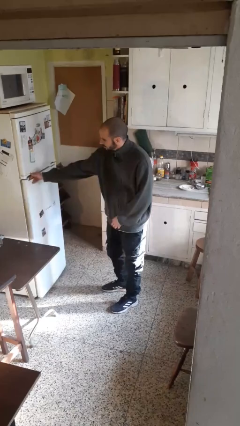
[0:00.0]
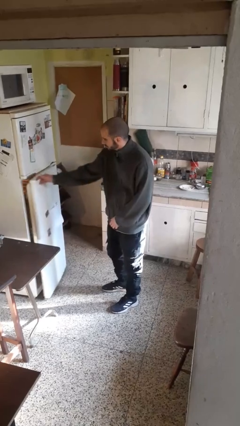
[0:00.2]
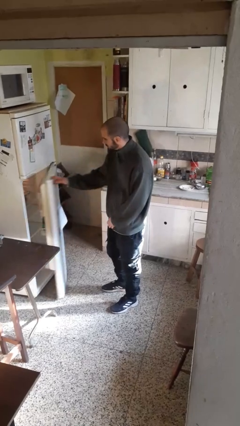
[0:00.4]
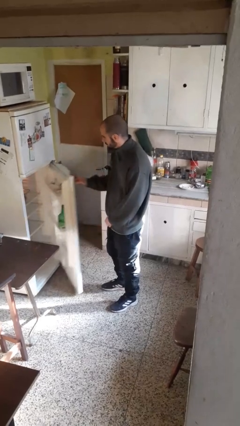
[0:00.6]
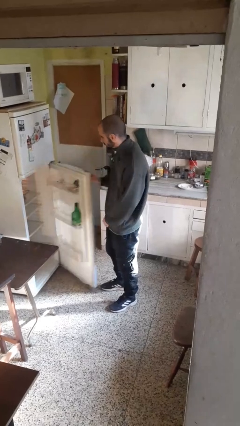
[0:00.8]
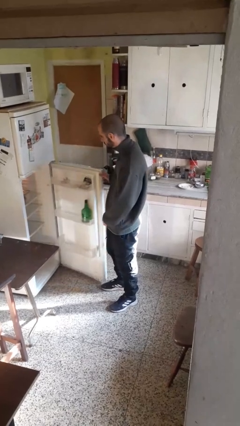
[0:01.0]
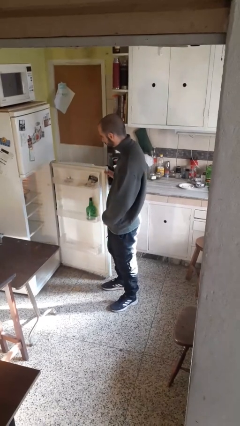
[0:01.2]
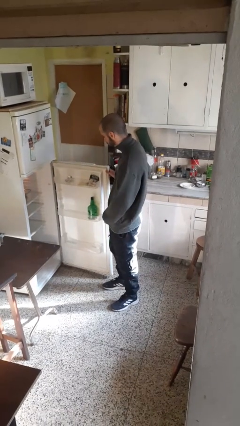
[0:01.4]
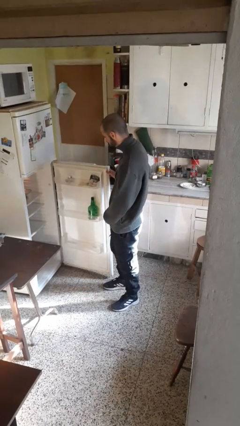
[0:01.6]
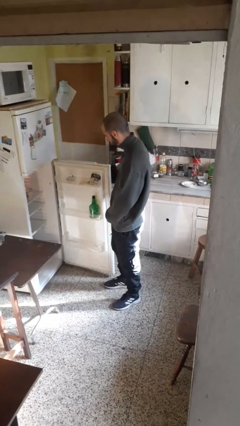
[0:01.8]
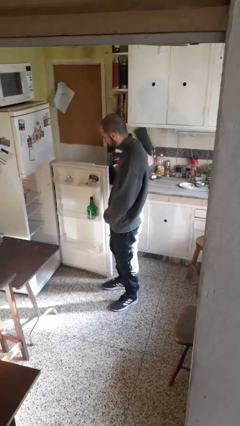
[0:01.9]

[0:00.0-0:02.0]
person opens refrigerator

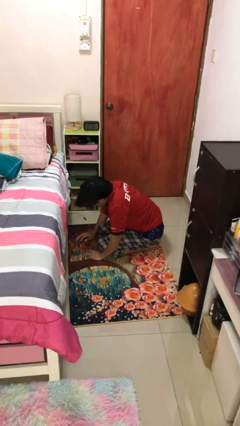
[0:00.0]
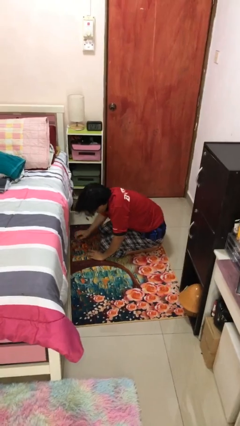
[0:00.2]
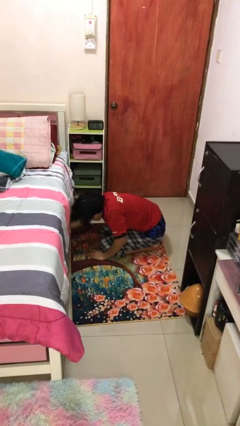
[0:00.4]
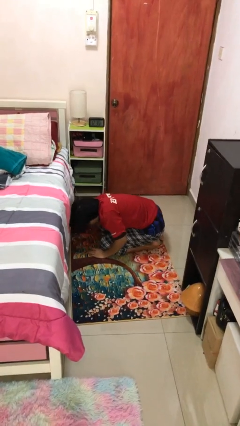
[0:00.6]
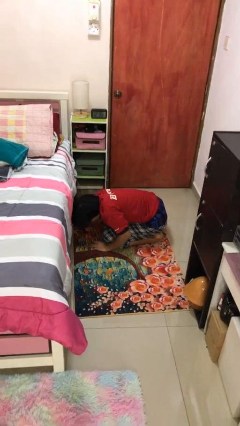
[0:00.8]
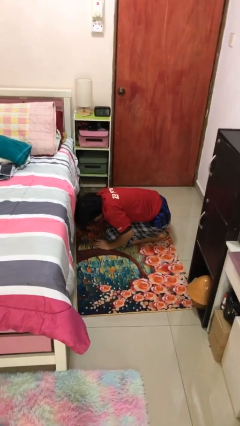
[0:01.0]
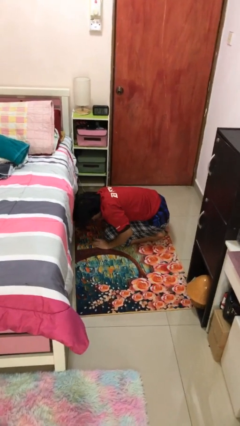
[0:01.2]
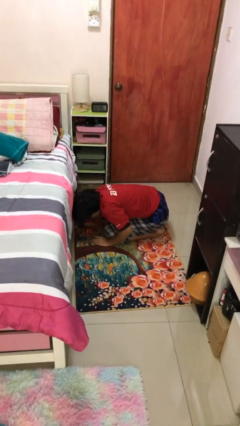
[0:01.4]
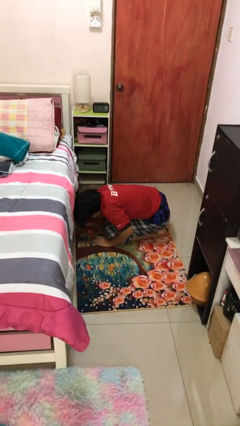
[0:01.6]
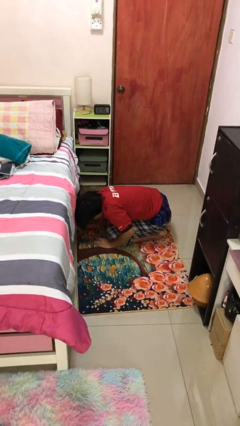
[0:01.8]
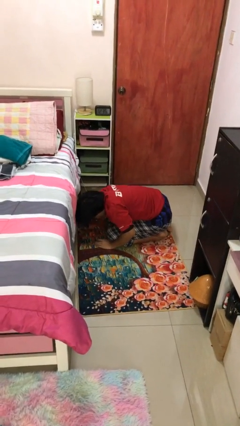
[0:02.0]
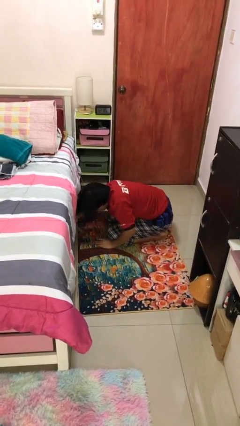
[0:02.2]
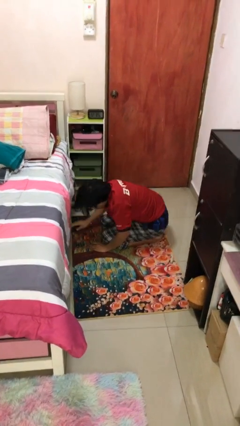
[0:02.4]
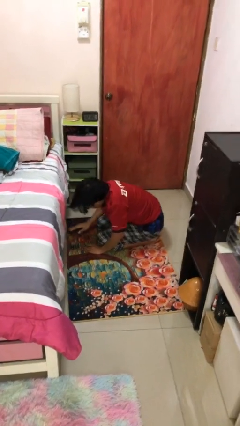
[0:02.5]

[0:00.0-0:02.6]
person searches under bed

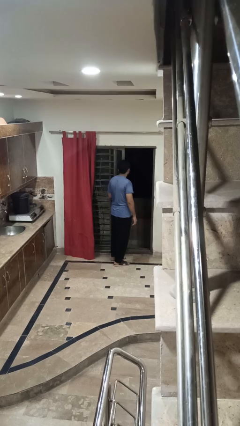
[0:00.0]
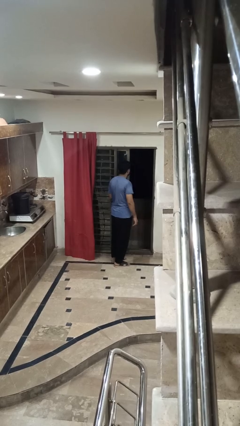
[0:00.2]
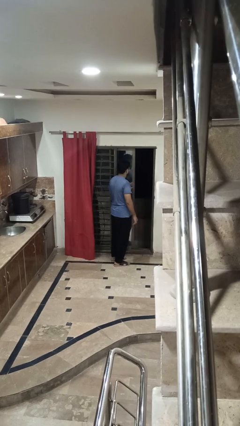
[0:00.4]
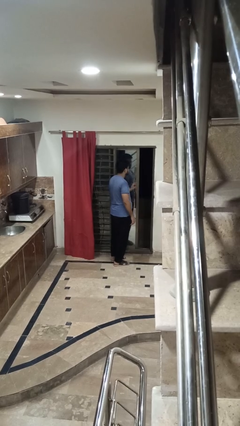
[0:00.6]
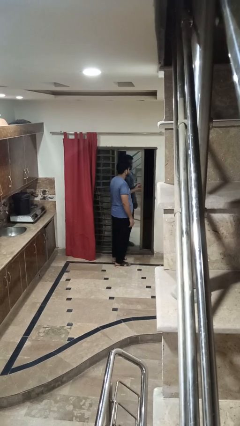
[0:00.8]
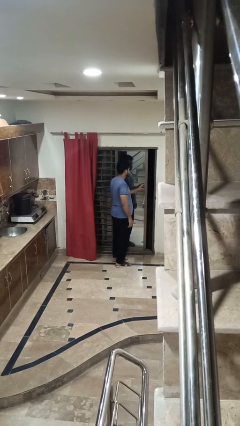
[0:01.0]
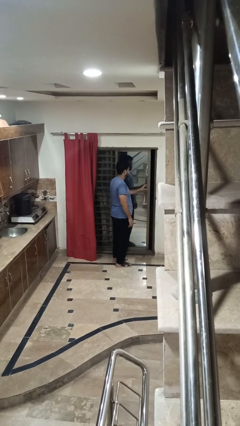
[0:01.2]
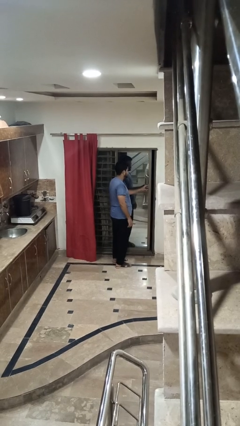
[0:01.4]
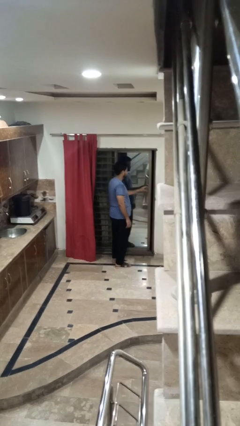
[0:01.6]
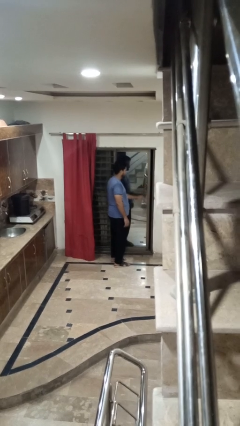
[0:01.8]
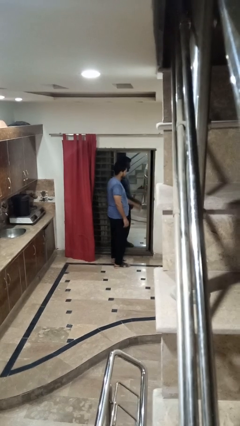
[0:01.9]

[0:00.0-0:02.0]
person closes sliding door

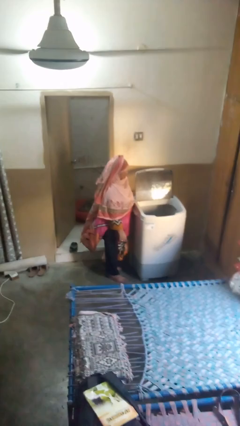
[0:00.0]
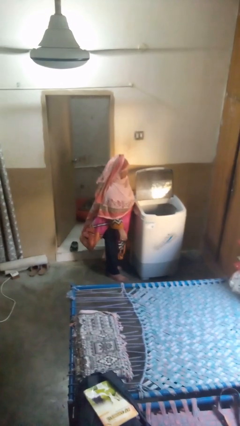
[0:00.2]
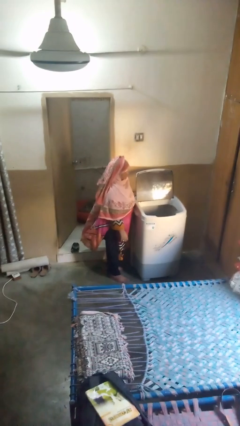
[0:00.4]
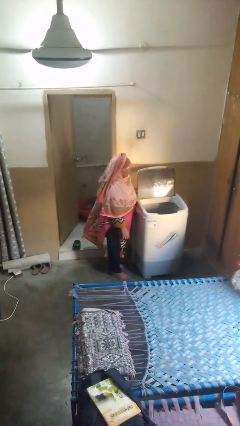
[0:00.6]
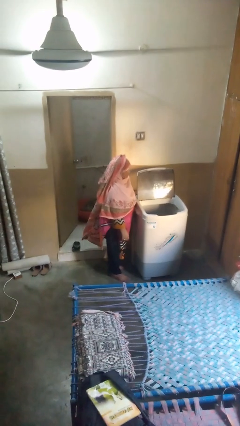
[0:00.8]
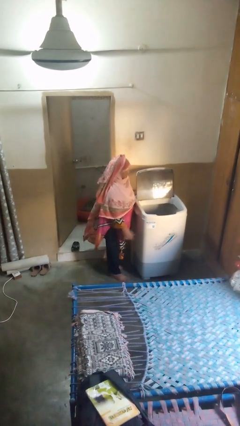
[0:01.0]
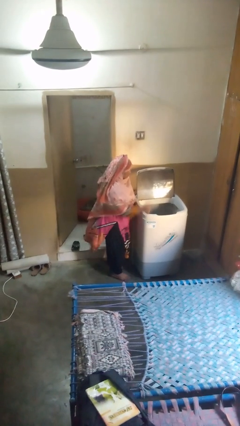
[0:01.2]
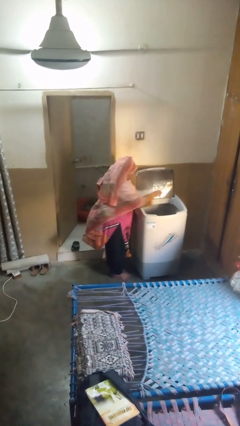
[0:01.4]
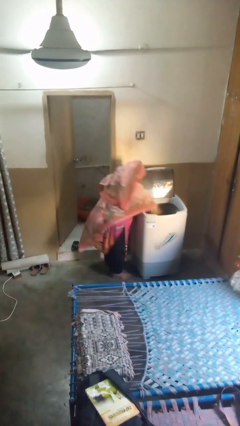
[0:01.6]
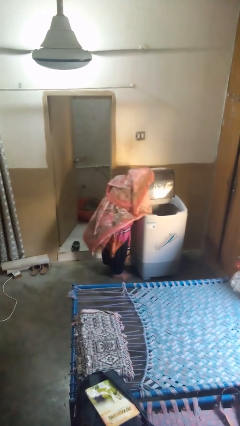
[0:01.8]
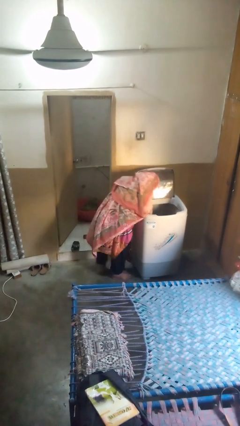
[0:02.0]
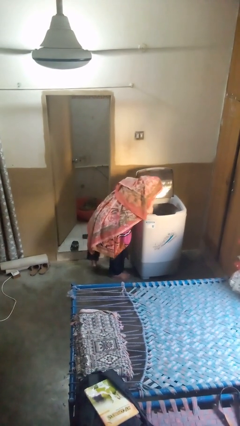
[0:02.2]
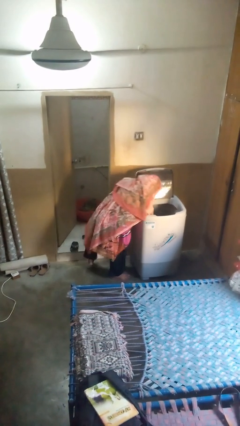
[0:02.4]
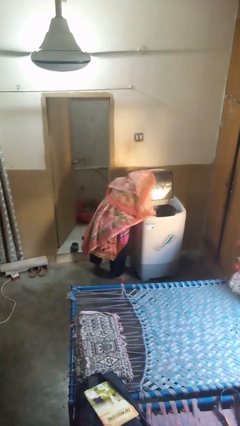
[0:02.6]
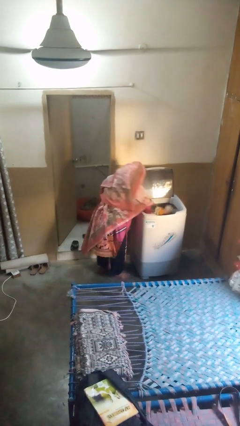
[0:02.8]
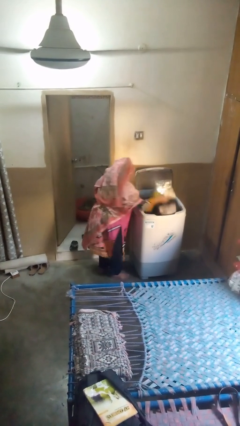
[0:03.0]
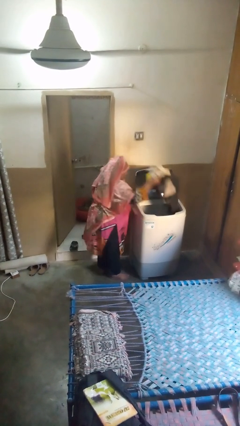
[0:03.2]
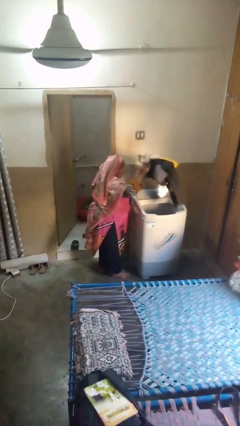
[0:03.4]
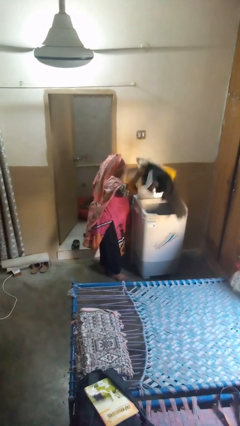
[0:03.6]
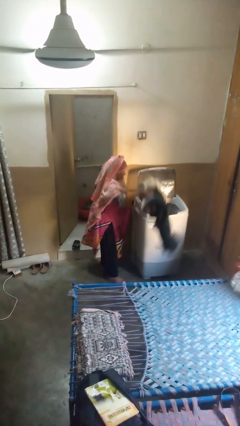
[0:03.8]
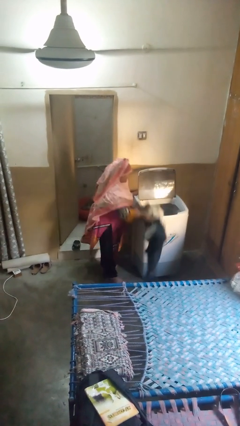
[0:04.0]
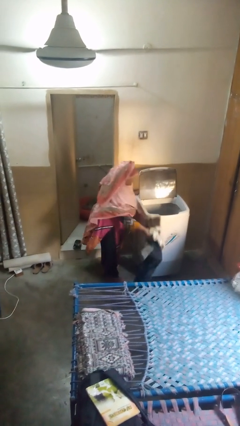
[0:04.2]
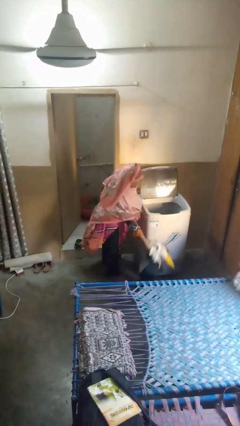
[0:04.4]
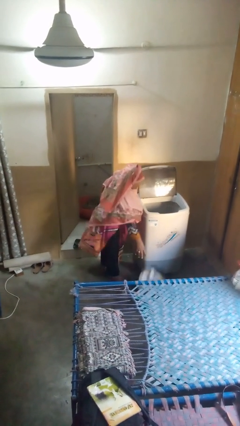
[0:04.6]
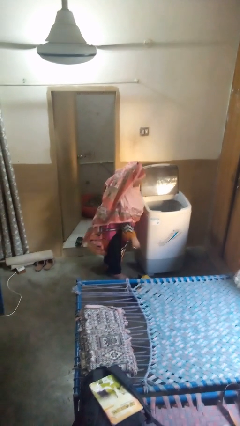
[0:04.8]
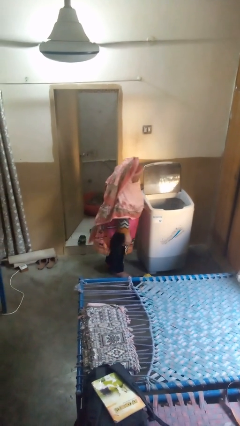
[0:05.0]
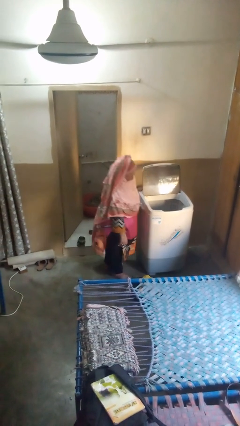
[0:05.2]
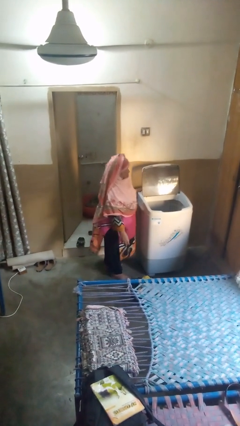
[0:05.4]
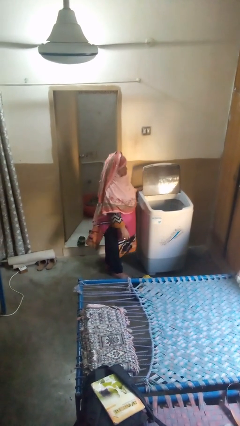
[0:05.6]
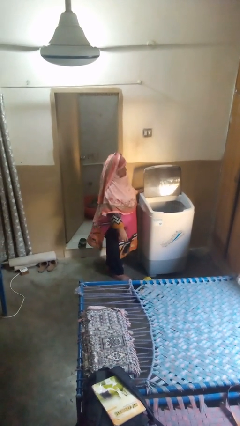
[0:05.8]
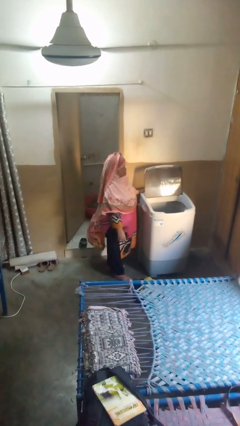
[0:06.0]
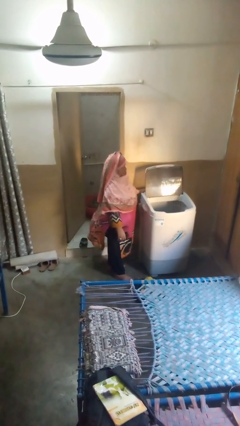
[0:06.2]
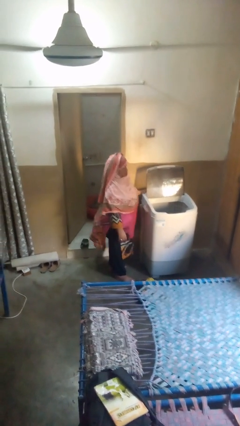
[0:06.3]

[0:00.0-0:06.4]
person unloads clotheswasher

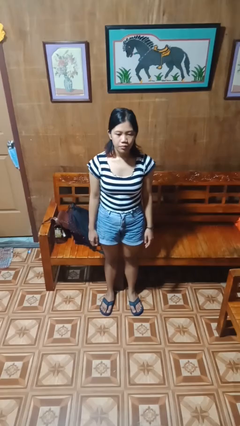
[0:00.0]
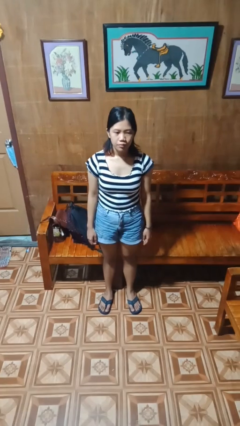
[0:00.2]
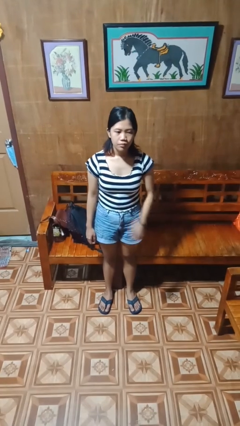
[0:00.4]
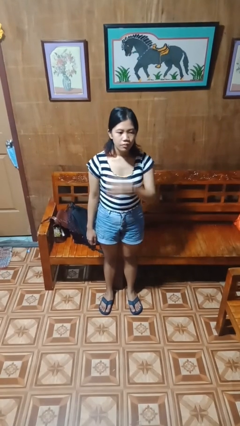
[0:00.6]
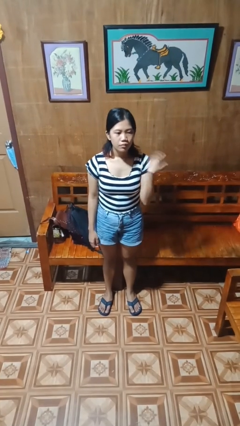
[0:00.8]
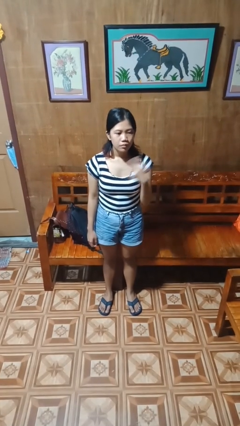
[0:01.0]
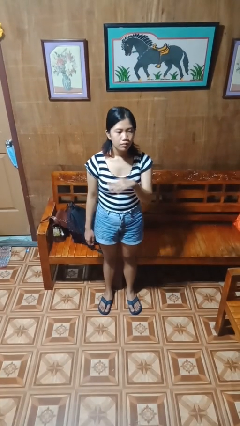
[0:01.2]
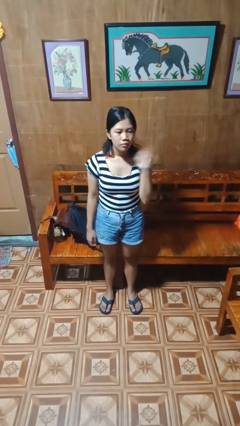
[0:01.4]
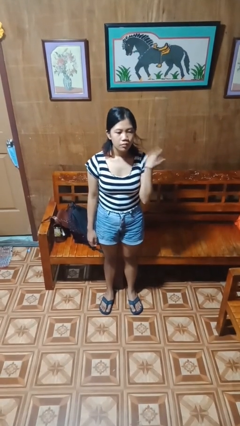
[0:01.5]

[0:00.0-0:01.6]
person gestures cut

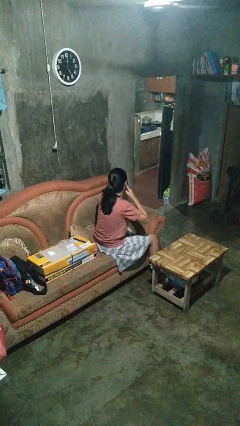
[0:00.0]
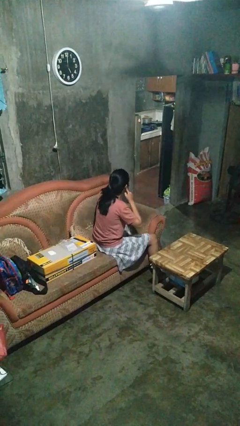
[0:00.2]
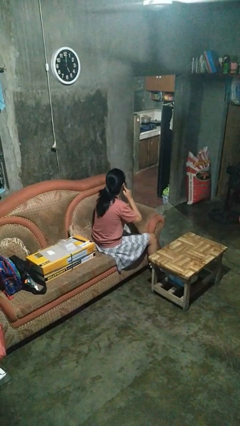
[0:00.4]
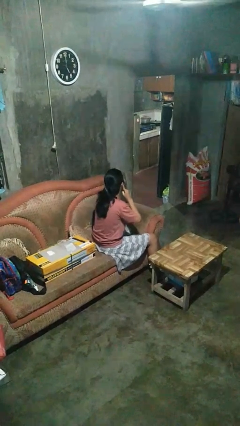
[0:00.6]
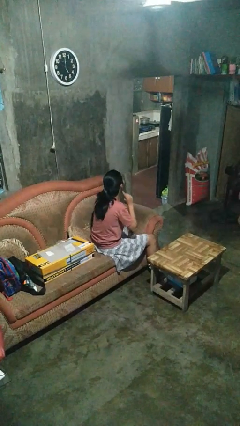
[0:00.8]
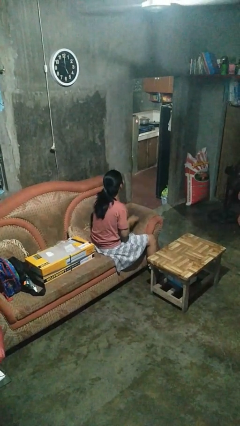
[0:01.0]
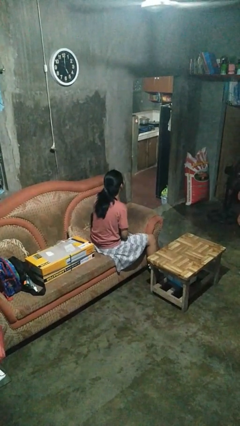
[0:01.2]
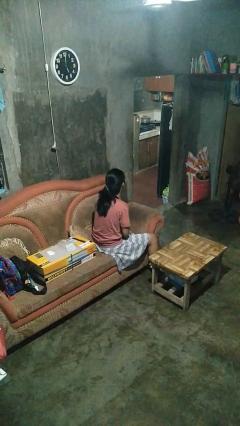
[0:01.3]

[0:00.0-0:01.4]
person puts fingers in ear

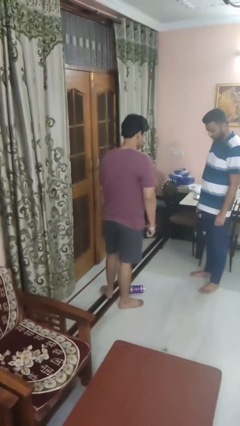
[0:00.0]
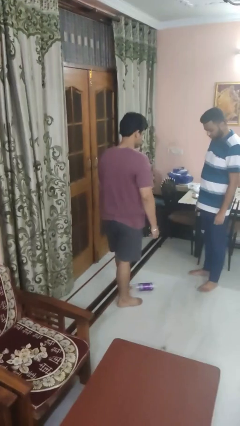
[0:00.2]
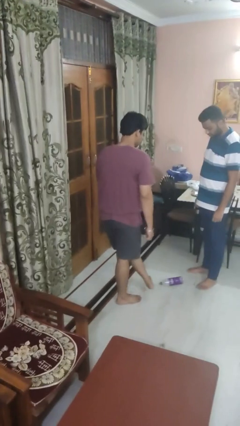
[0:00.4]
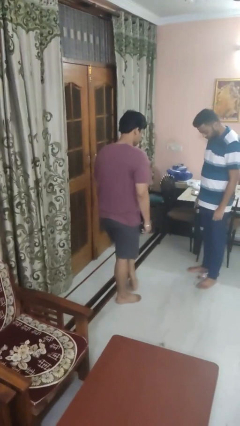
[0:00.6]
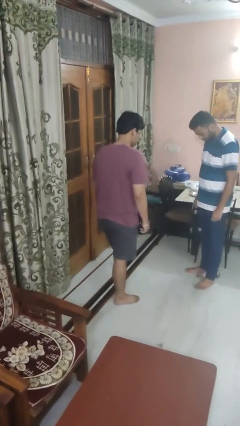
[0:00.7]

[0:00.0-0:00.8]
person kicks object to person
